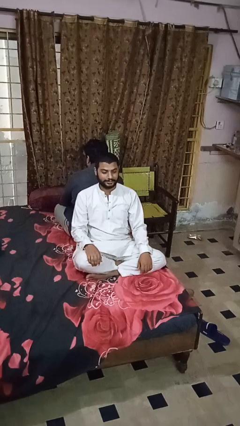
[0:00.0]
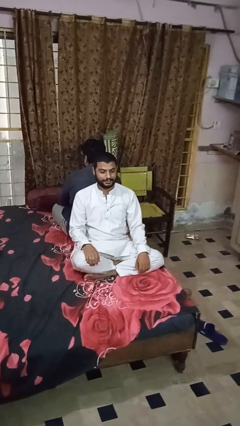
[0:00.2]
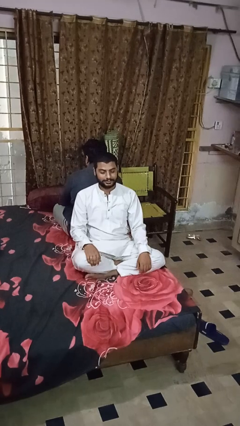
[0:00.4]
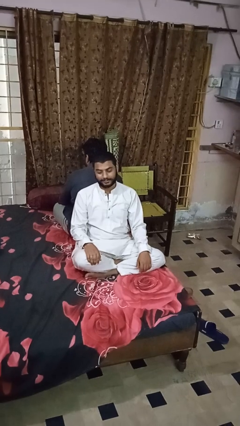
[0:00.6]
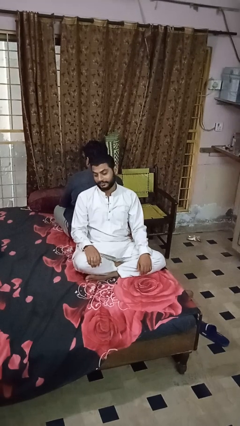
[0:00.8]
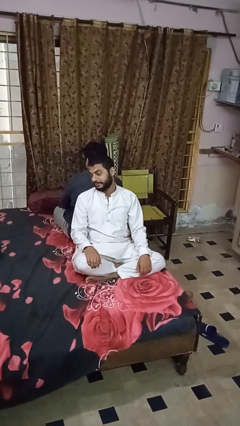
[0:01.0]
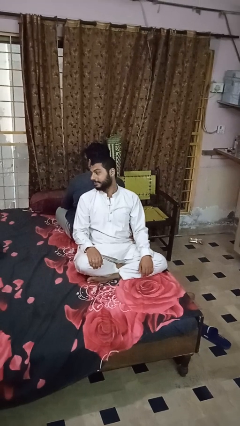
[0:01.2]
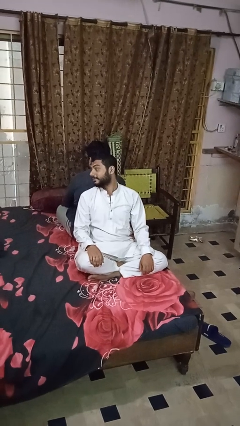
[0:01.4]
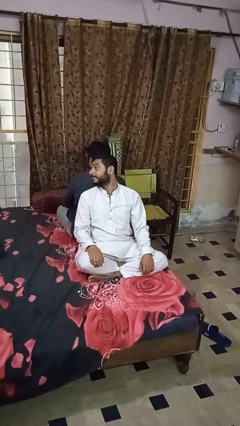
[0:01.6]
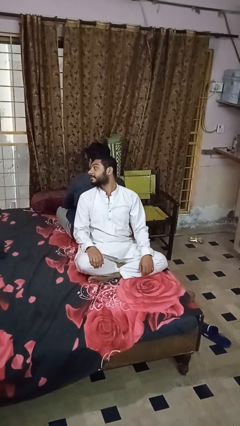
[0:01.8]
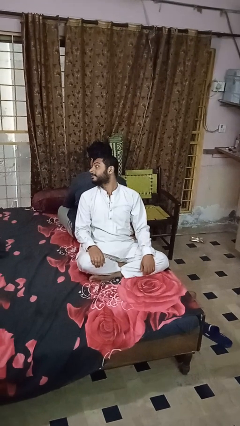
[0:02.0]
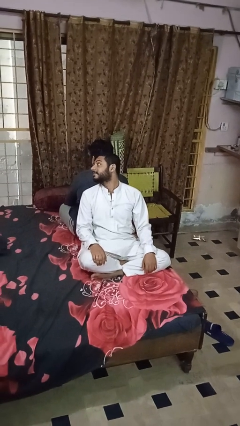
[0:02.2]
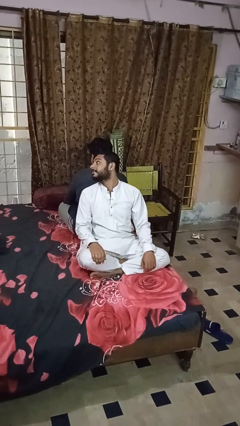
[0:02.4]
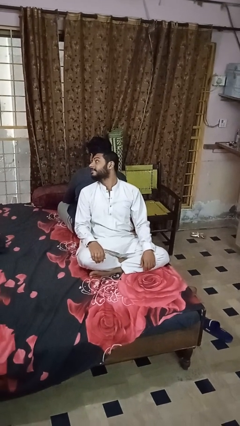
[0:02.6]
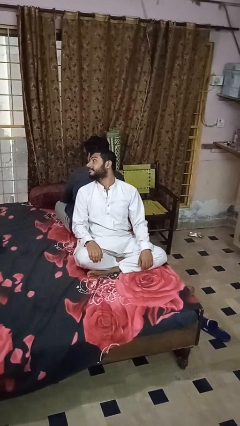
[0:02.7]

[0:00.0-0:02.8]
person looks over shoulder

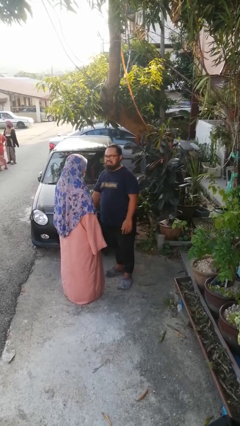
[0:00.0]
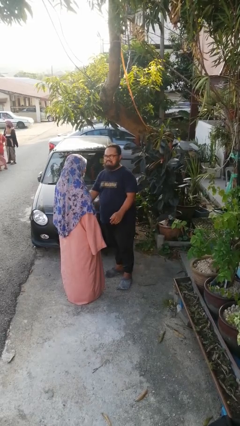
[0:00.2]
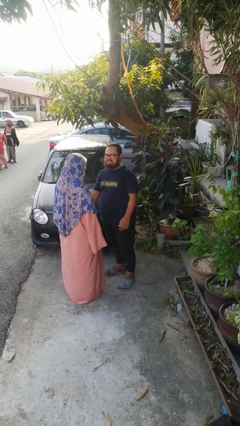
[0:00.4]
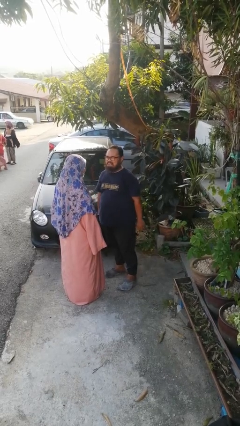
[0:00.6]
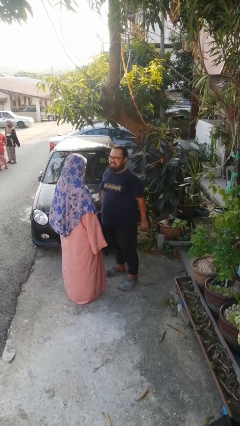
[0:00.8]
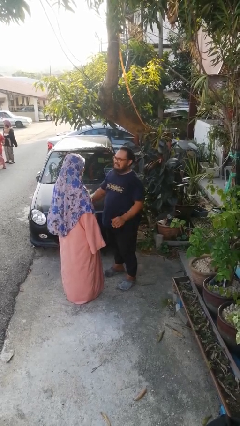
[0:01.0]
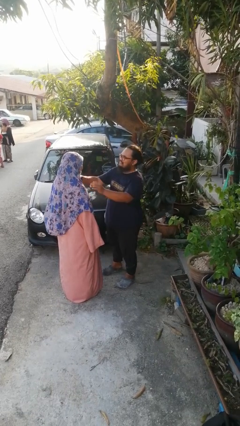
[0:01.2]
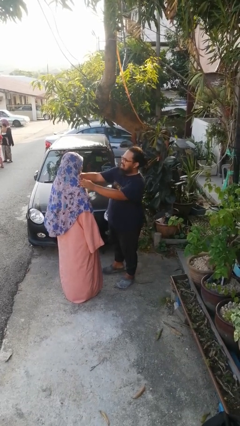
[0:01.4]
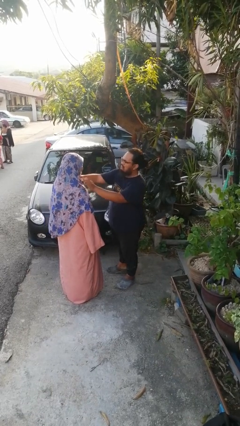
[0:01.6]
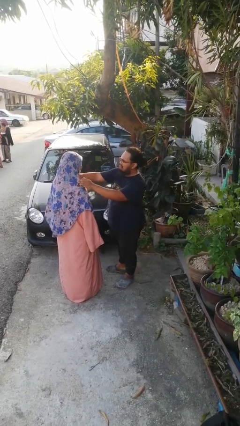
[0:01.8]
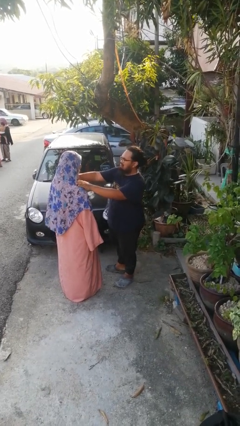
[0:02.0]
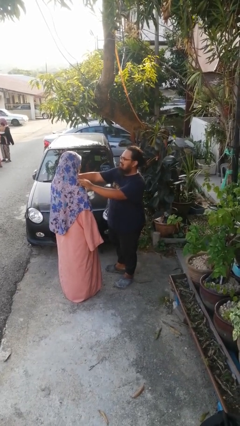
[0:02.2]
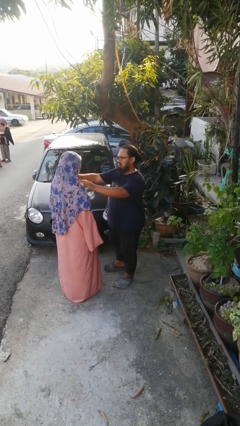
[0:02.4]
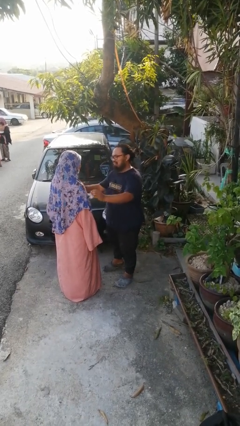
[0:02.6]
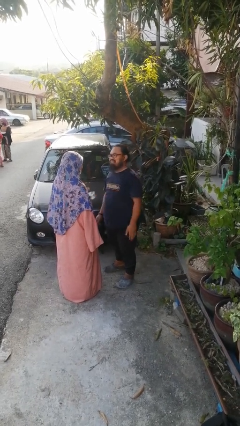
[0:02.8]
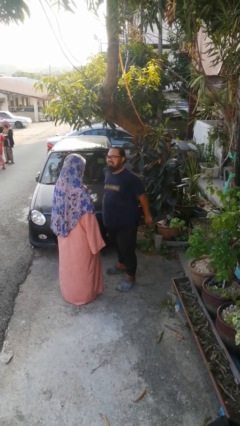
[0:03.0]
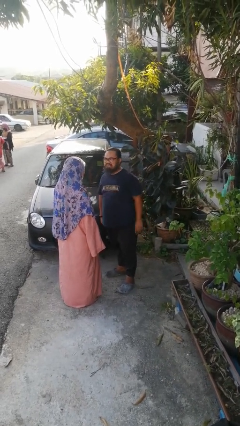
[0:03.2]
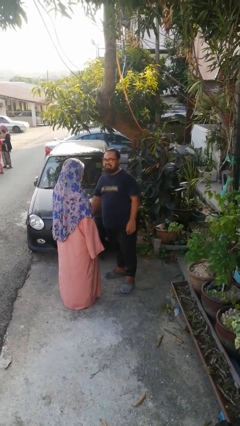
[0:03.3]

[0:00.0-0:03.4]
person pounds shoulders of person

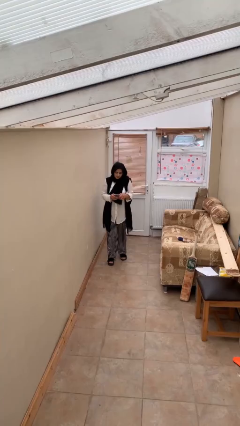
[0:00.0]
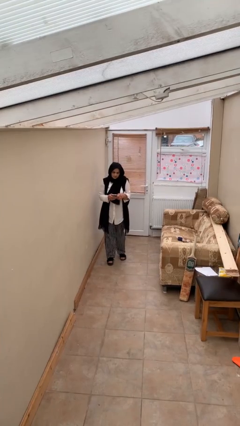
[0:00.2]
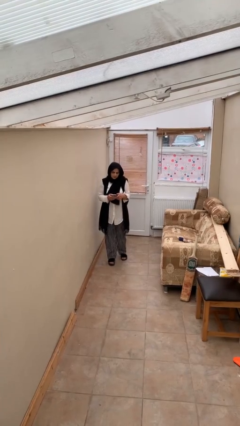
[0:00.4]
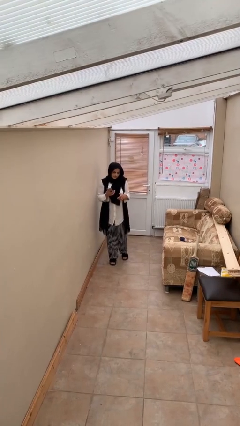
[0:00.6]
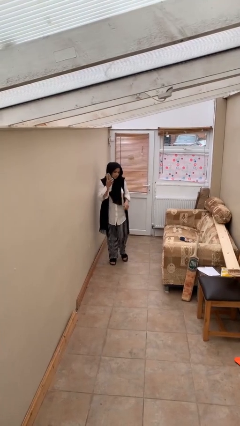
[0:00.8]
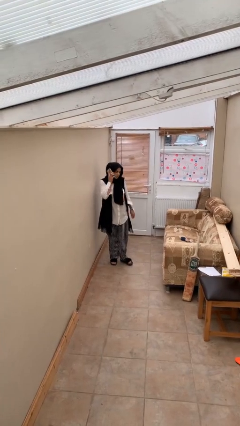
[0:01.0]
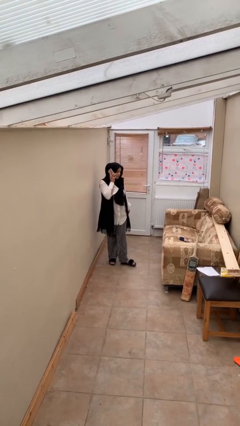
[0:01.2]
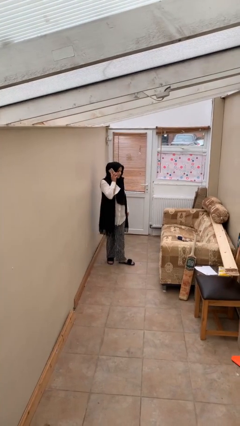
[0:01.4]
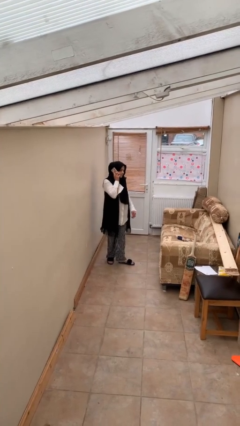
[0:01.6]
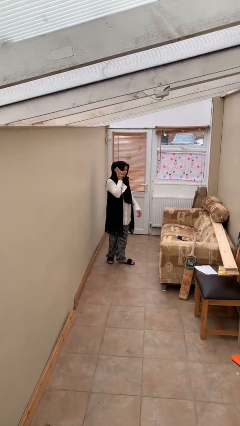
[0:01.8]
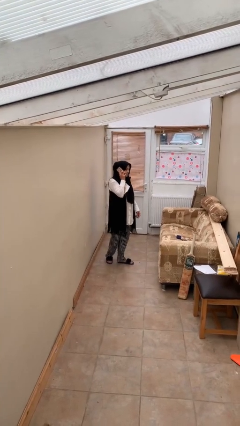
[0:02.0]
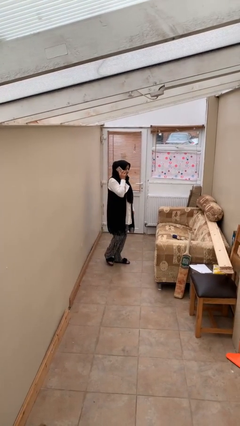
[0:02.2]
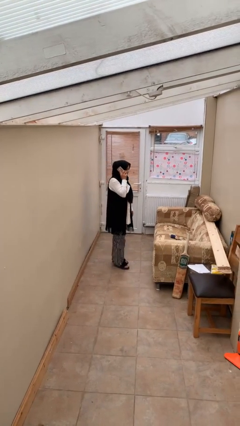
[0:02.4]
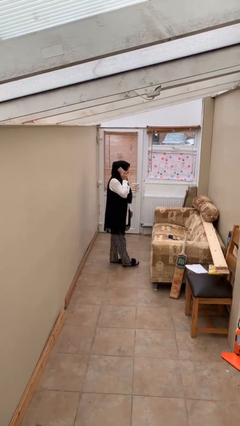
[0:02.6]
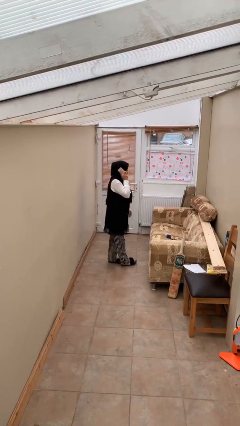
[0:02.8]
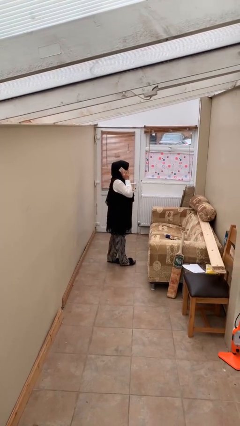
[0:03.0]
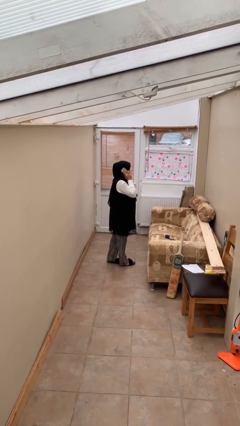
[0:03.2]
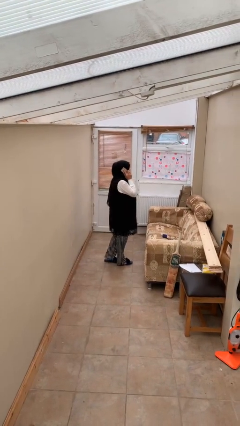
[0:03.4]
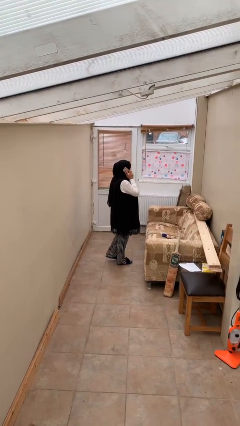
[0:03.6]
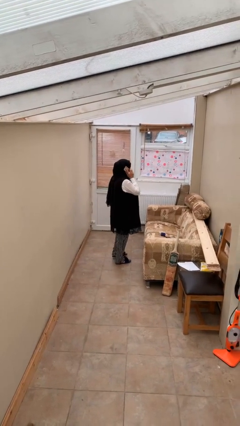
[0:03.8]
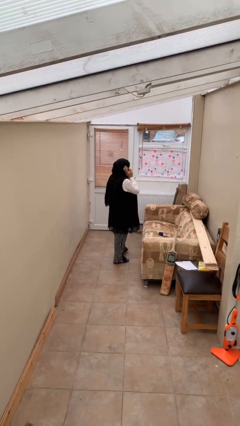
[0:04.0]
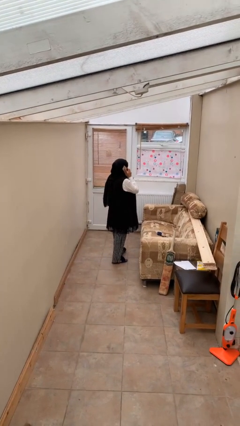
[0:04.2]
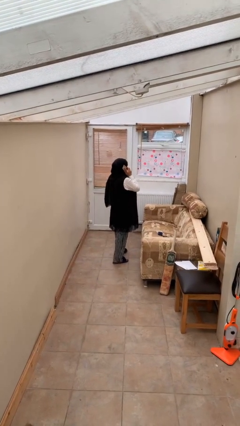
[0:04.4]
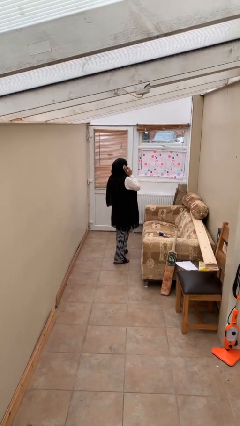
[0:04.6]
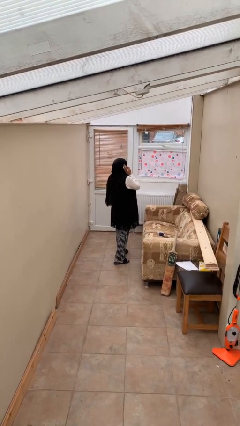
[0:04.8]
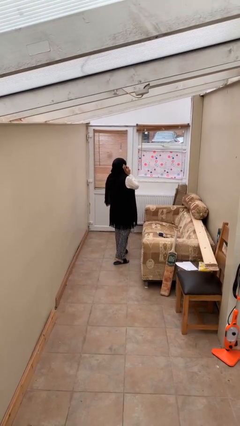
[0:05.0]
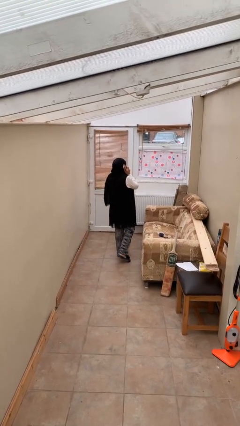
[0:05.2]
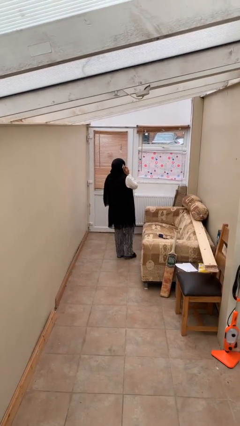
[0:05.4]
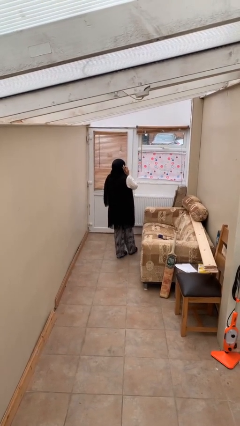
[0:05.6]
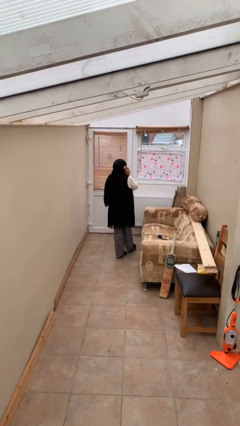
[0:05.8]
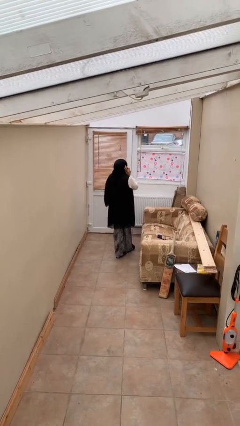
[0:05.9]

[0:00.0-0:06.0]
person talks on phone

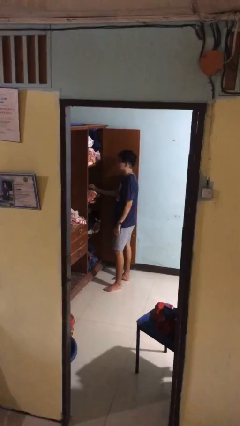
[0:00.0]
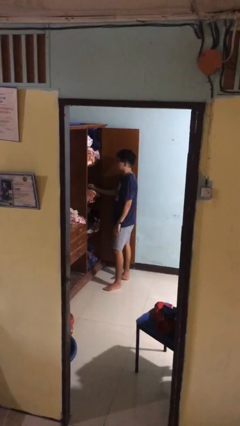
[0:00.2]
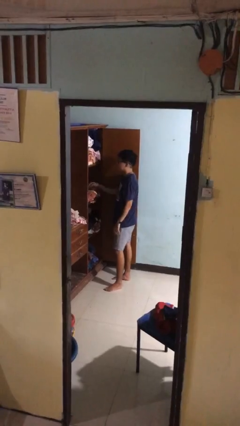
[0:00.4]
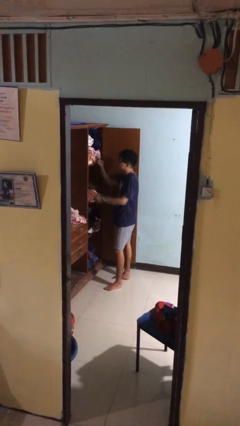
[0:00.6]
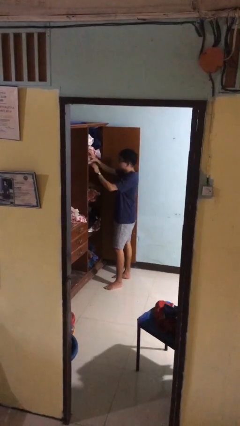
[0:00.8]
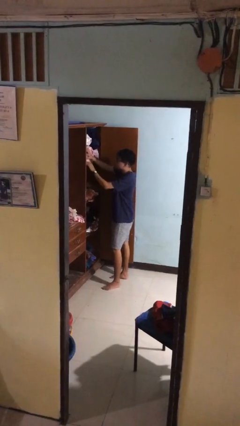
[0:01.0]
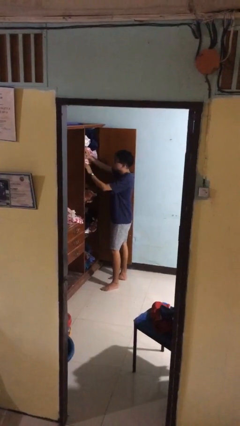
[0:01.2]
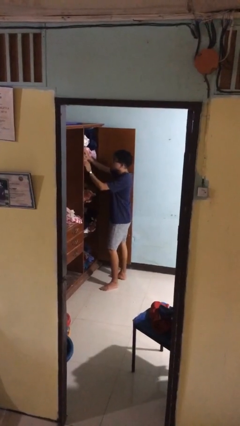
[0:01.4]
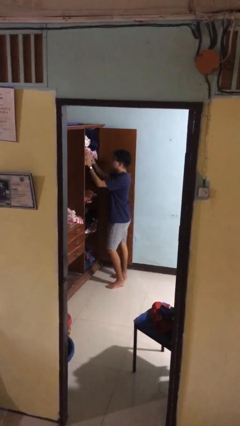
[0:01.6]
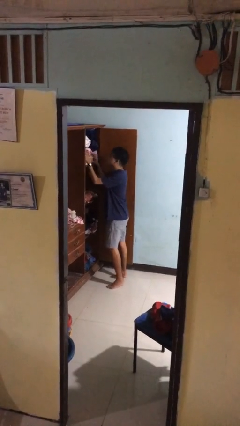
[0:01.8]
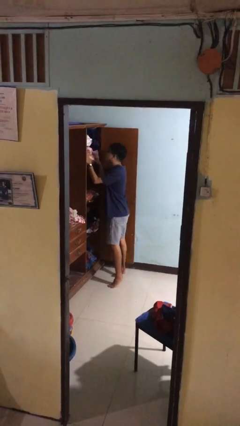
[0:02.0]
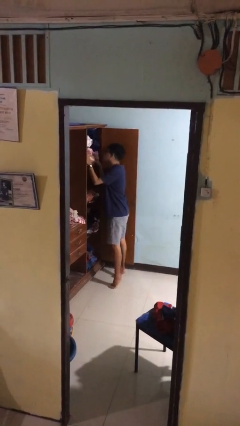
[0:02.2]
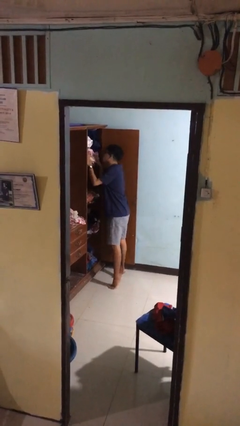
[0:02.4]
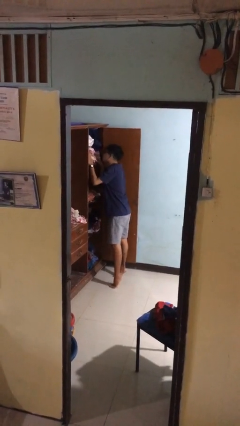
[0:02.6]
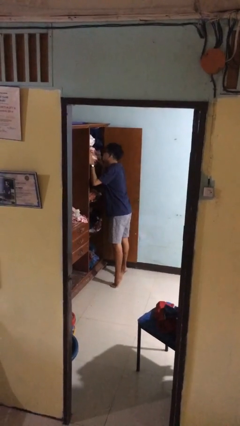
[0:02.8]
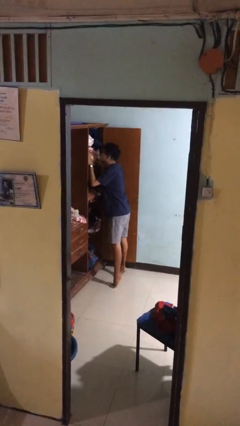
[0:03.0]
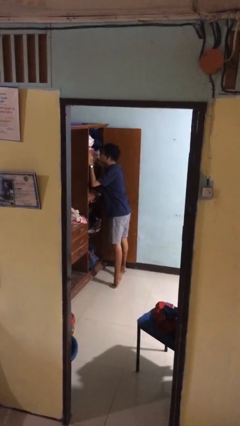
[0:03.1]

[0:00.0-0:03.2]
person searches in cabinet

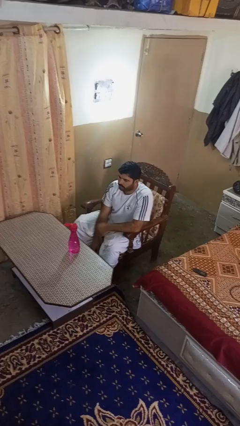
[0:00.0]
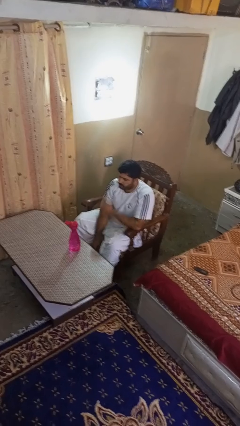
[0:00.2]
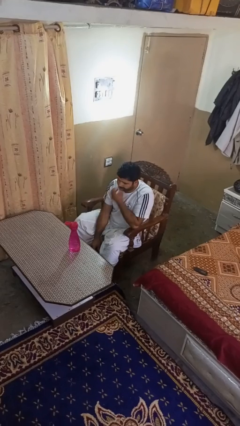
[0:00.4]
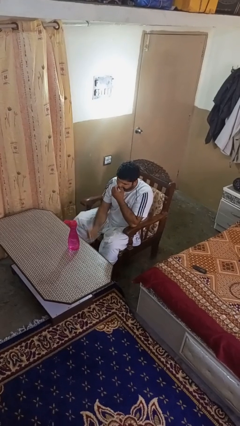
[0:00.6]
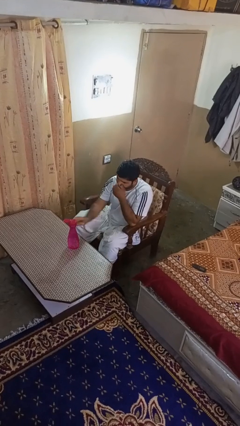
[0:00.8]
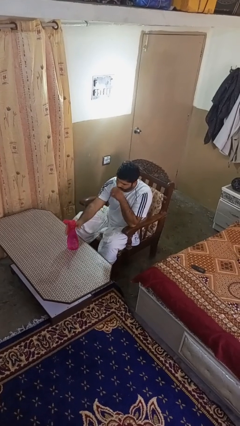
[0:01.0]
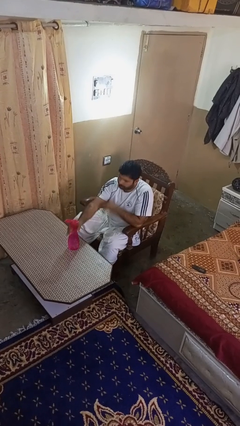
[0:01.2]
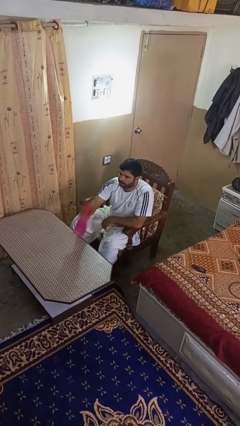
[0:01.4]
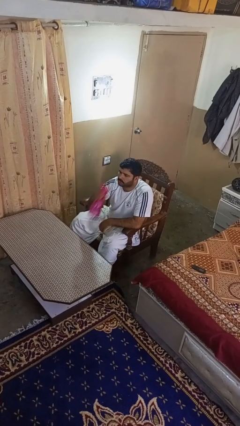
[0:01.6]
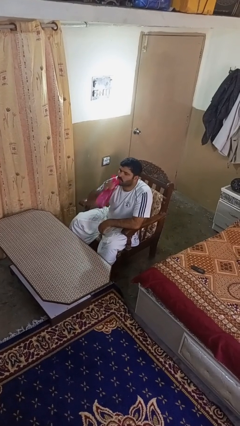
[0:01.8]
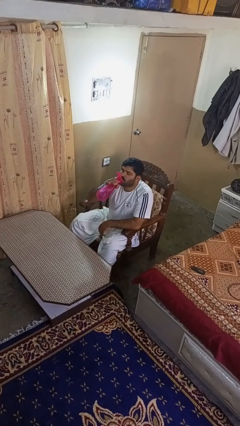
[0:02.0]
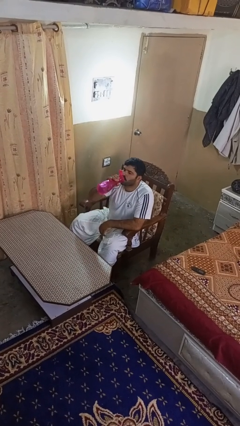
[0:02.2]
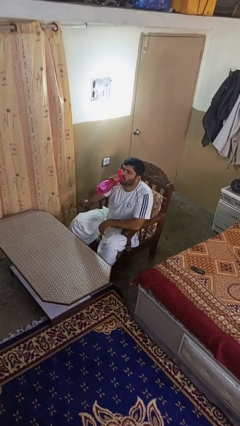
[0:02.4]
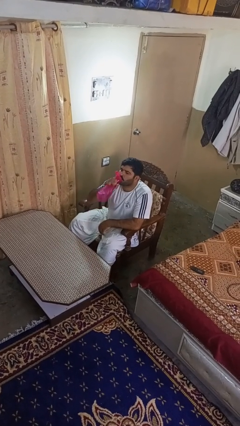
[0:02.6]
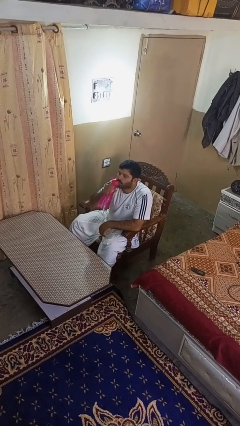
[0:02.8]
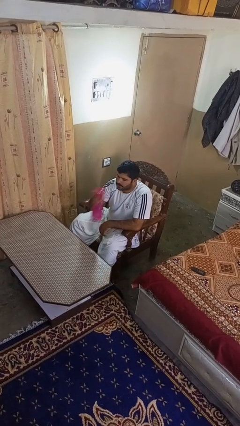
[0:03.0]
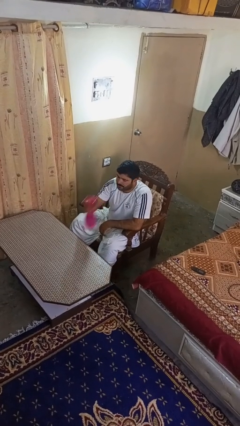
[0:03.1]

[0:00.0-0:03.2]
person drinks from bottle
